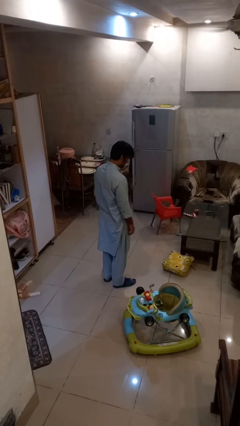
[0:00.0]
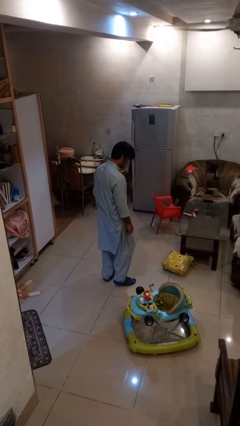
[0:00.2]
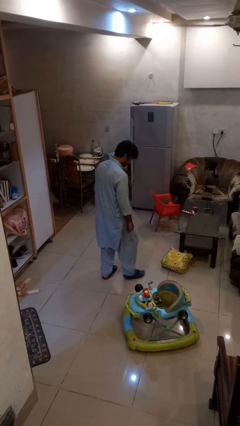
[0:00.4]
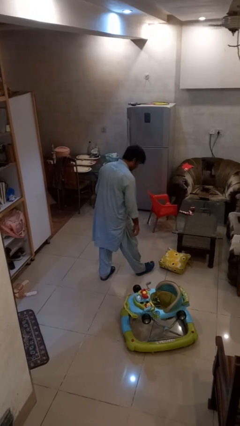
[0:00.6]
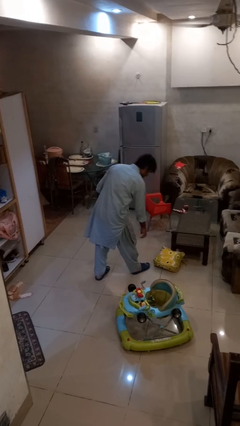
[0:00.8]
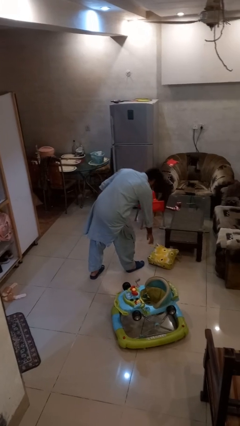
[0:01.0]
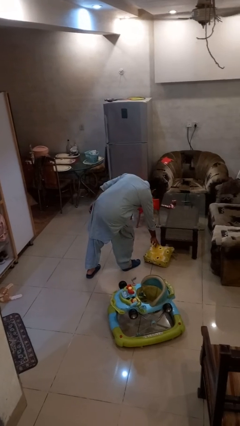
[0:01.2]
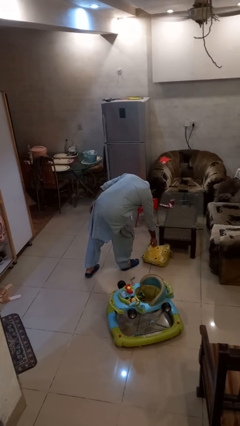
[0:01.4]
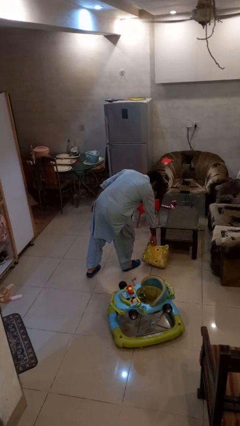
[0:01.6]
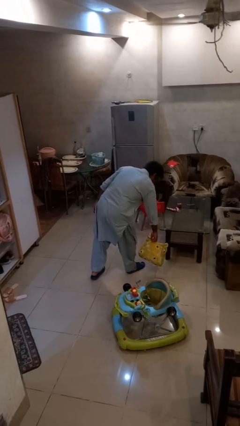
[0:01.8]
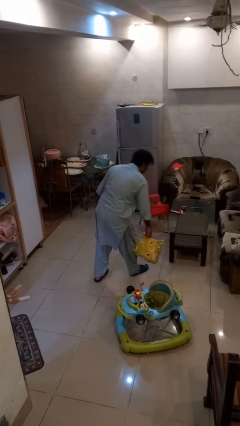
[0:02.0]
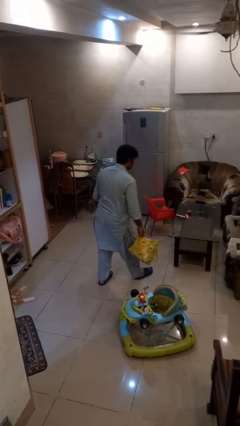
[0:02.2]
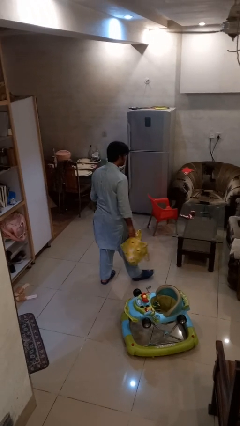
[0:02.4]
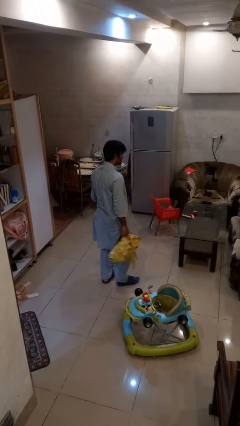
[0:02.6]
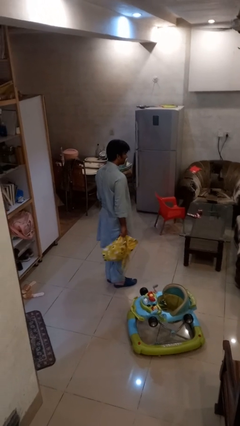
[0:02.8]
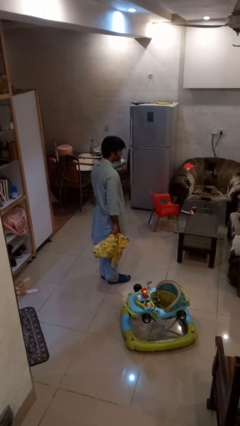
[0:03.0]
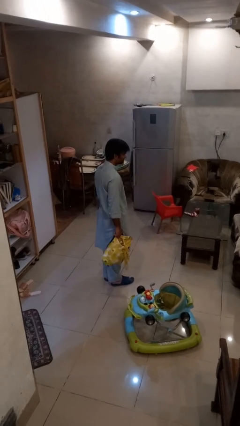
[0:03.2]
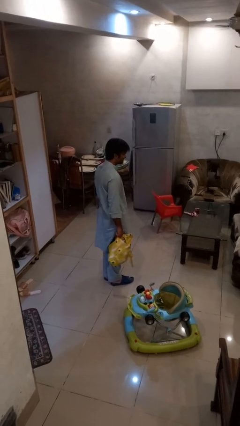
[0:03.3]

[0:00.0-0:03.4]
person picks up object from floor

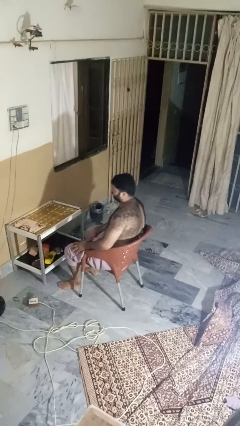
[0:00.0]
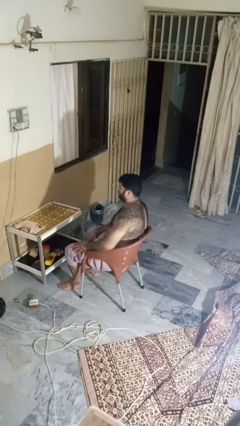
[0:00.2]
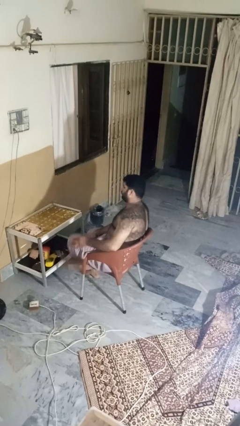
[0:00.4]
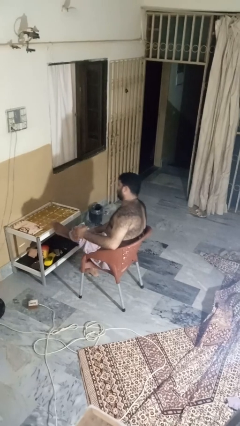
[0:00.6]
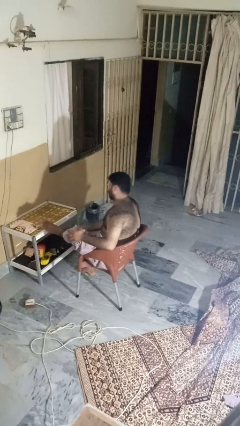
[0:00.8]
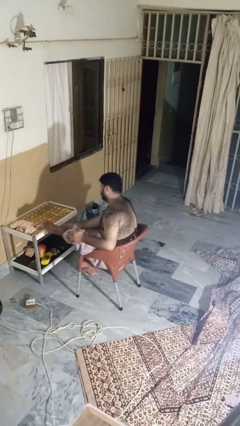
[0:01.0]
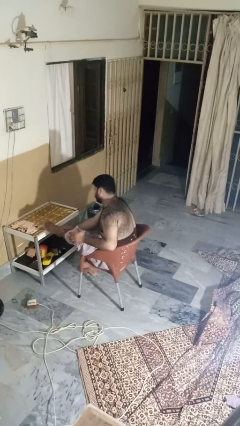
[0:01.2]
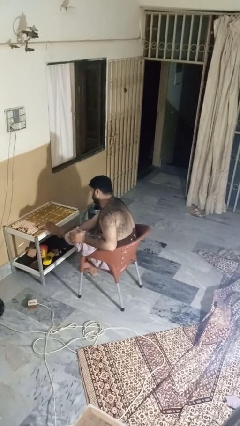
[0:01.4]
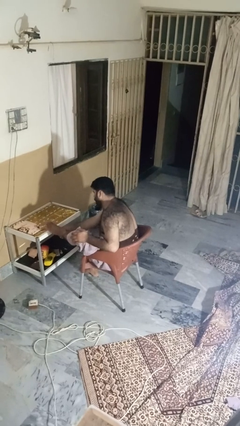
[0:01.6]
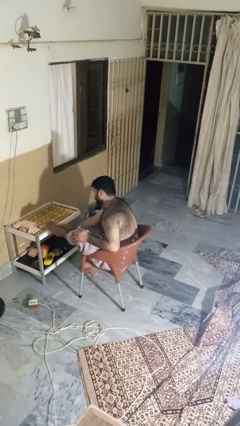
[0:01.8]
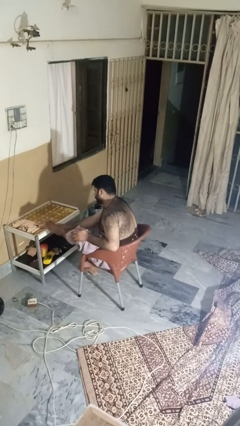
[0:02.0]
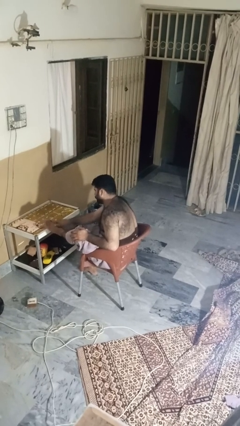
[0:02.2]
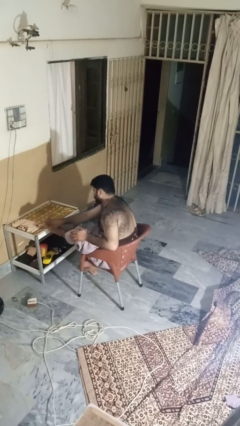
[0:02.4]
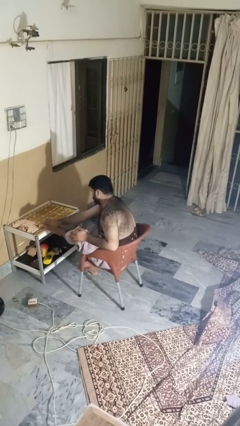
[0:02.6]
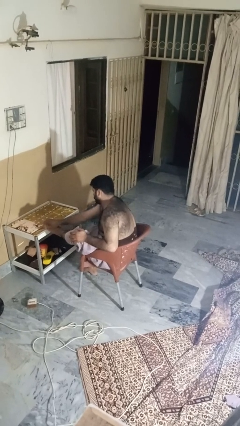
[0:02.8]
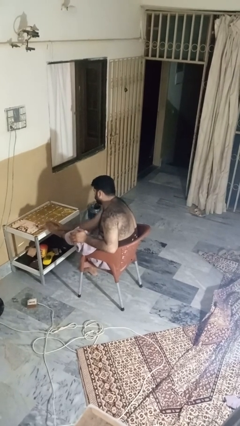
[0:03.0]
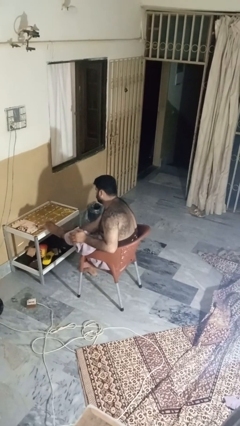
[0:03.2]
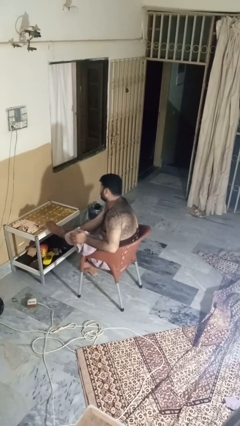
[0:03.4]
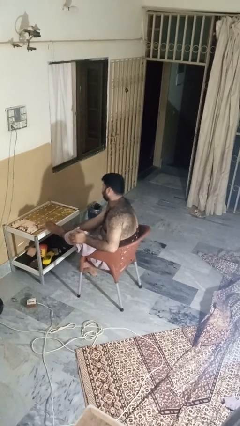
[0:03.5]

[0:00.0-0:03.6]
person stubs toe

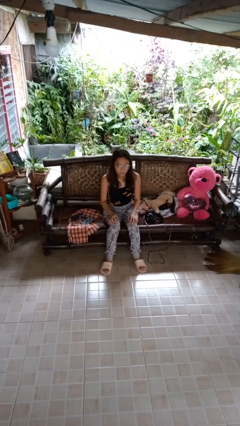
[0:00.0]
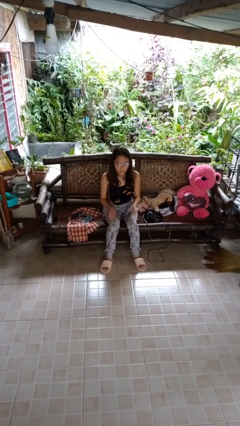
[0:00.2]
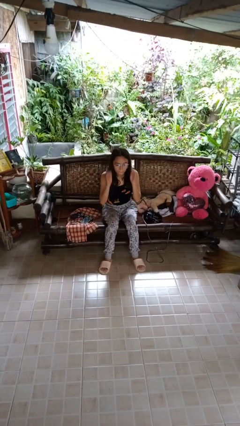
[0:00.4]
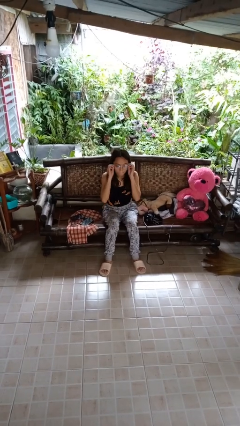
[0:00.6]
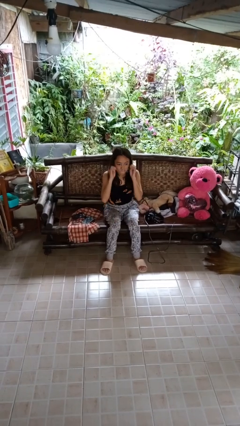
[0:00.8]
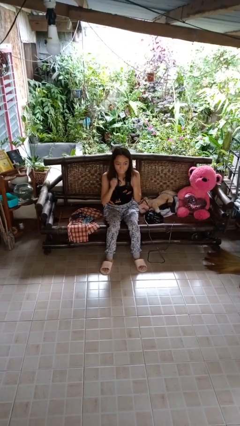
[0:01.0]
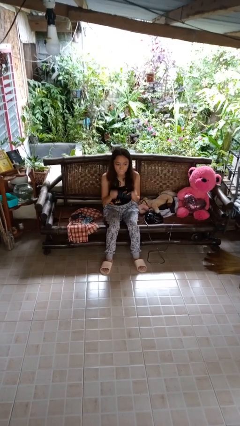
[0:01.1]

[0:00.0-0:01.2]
person takes off glasses

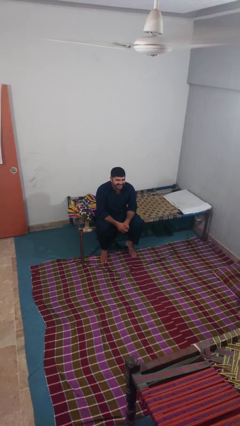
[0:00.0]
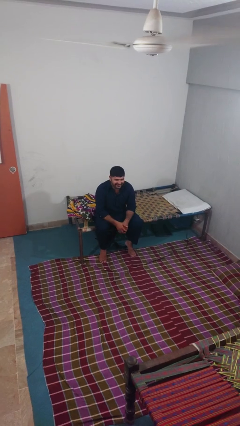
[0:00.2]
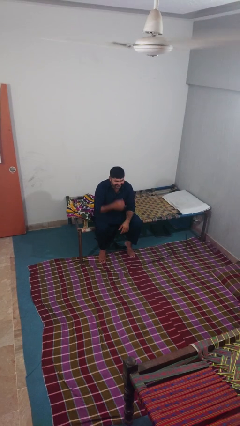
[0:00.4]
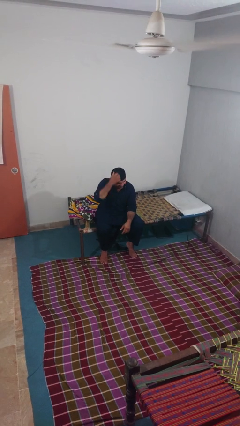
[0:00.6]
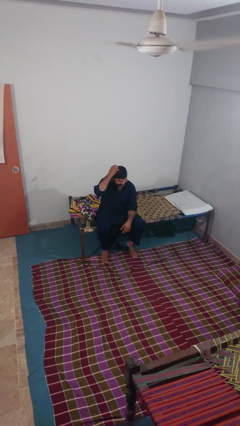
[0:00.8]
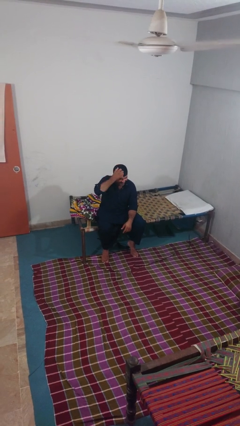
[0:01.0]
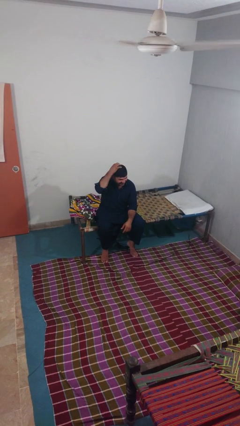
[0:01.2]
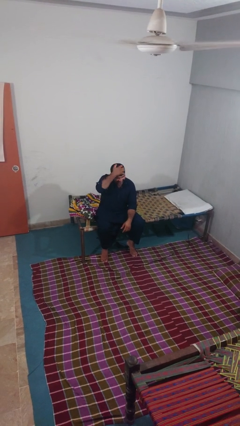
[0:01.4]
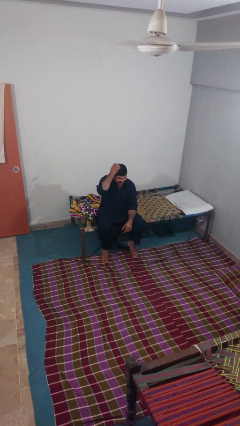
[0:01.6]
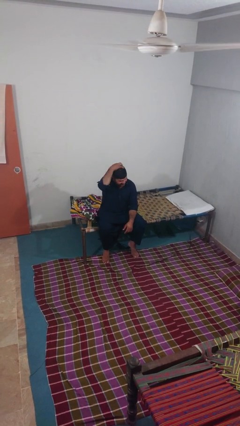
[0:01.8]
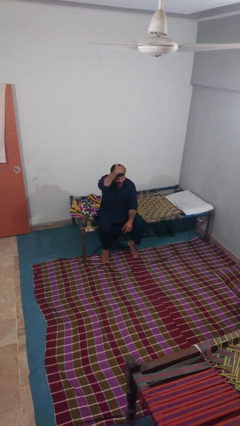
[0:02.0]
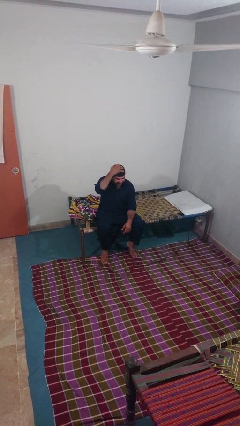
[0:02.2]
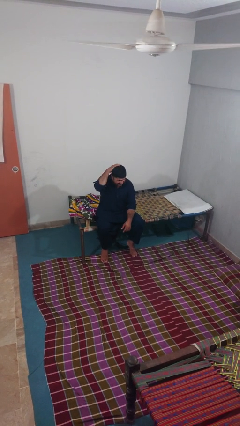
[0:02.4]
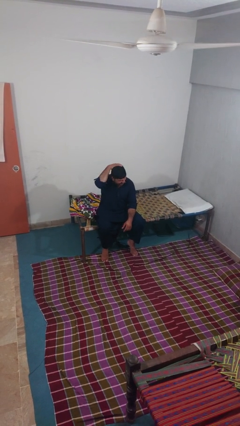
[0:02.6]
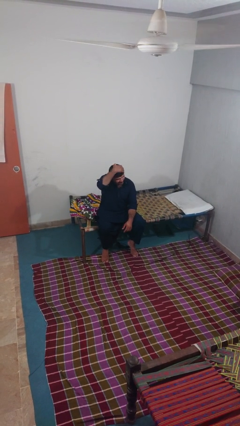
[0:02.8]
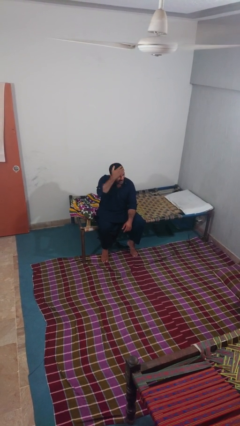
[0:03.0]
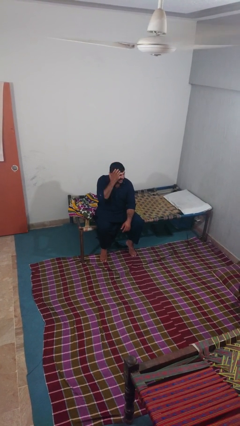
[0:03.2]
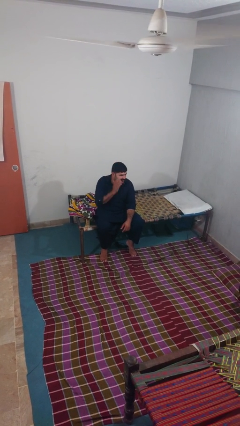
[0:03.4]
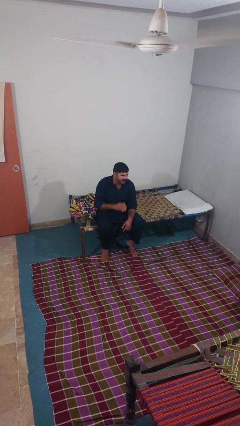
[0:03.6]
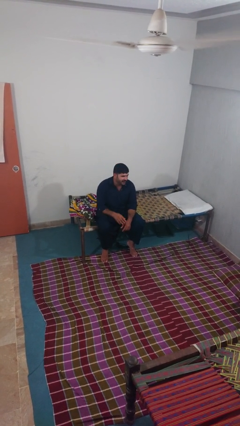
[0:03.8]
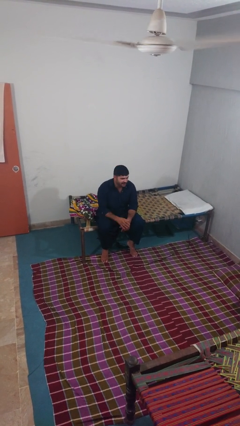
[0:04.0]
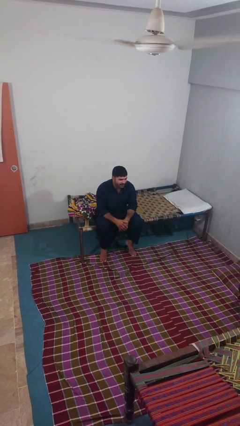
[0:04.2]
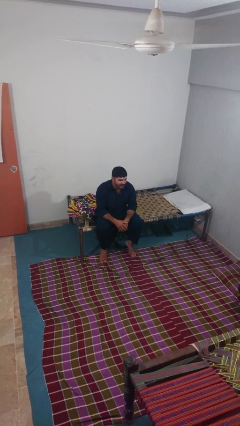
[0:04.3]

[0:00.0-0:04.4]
person scratches face

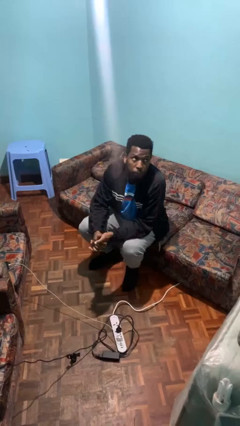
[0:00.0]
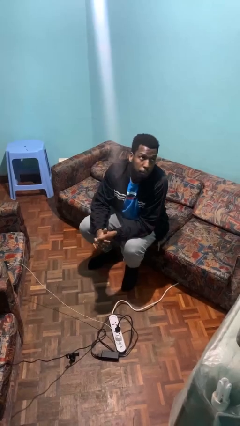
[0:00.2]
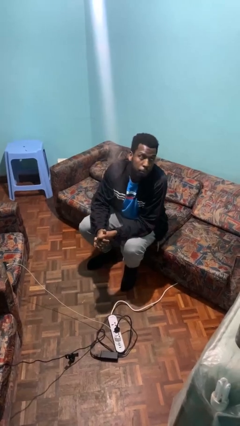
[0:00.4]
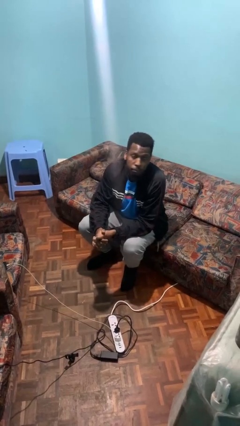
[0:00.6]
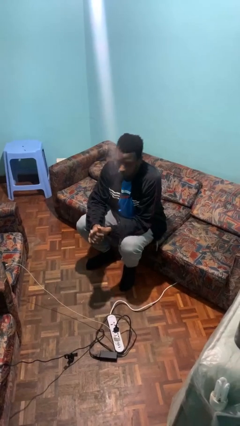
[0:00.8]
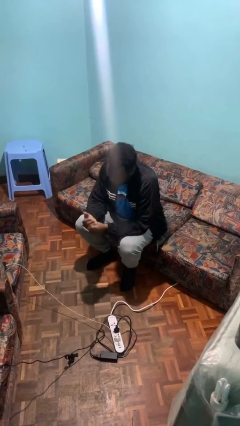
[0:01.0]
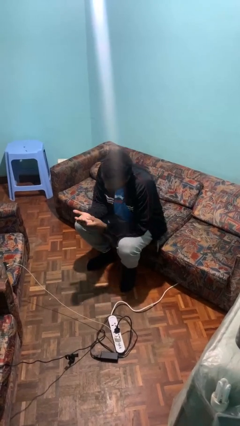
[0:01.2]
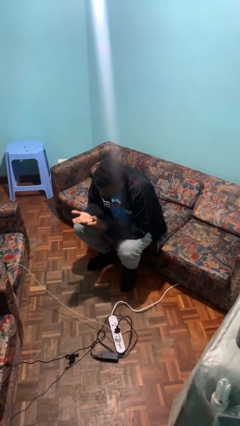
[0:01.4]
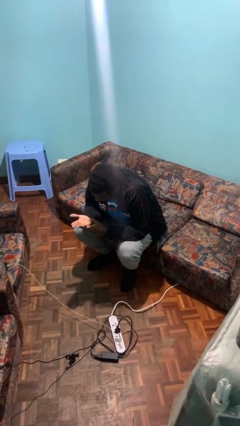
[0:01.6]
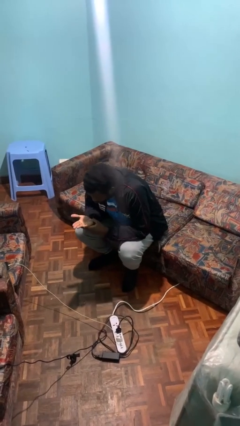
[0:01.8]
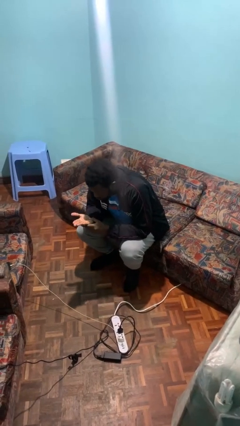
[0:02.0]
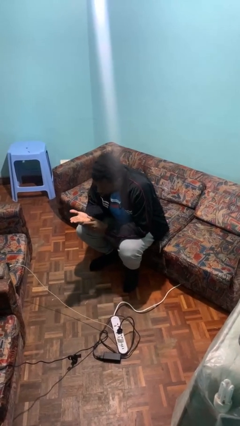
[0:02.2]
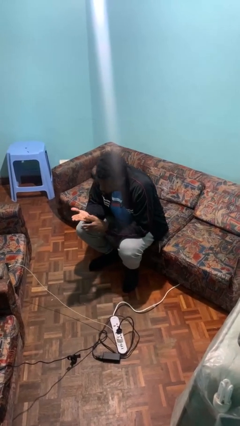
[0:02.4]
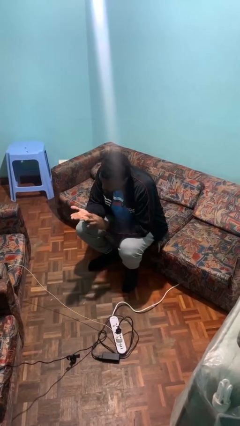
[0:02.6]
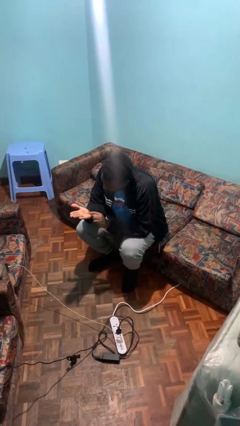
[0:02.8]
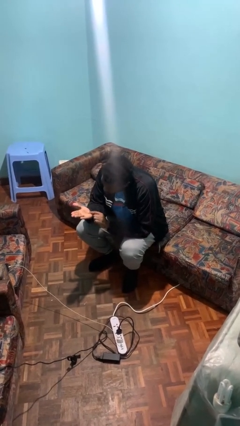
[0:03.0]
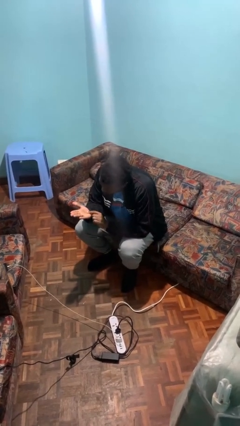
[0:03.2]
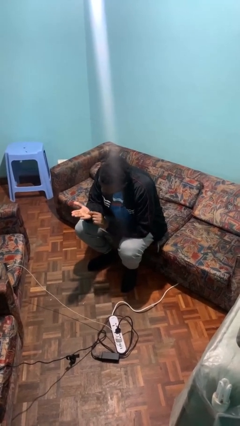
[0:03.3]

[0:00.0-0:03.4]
person looks at hands in lap

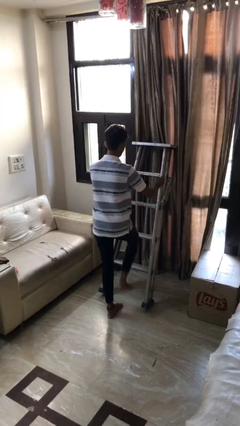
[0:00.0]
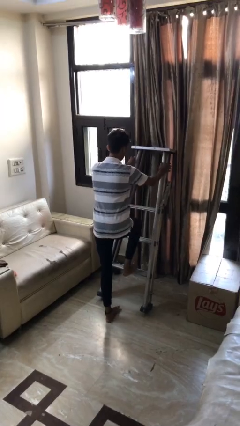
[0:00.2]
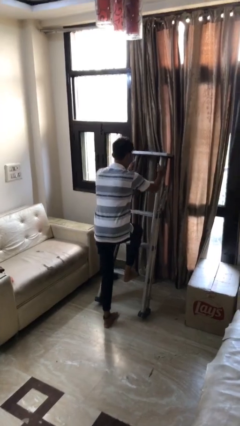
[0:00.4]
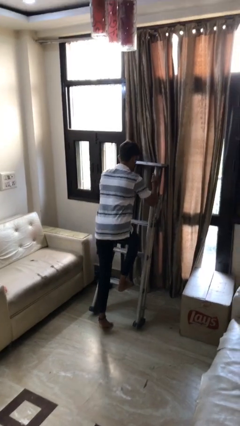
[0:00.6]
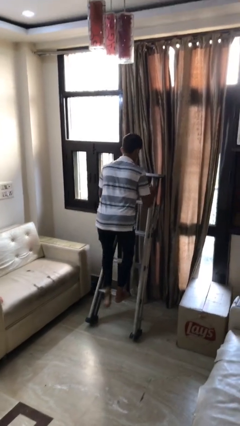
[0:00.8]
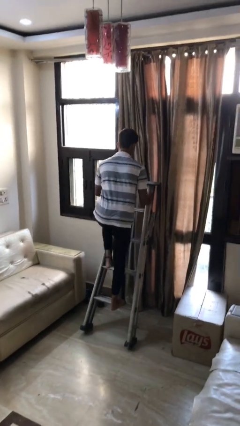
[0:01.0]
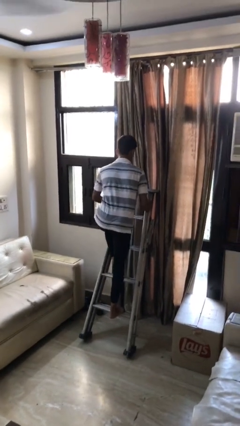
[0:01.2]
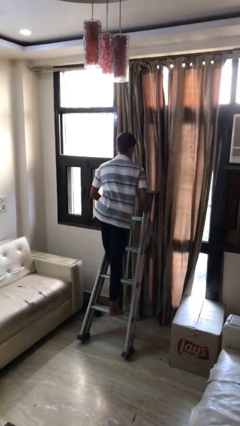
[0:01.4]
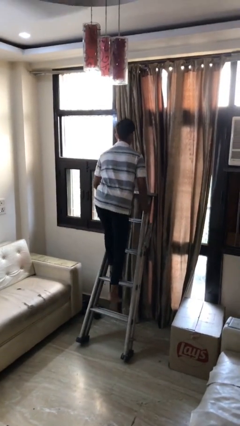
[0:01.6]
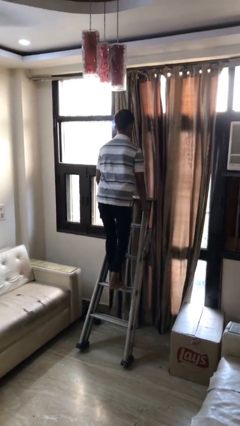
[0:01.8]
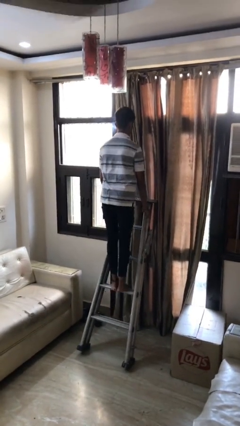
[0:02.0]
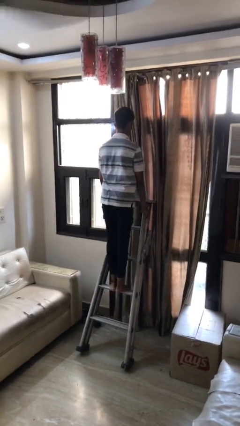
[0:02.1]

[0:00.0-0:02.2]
person climbs up ladder
